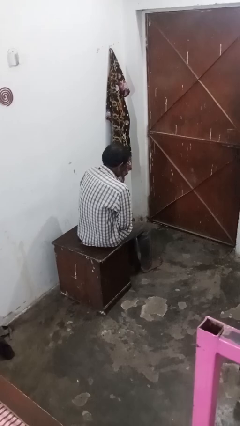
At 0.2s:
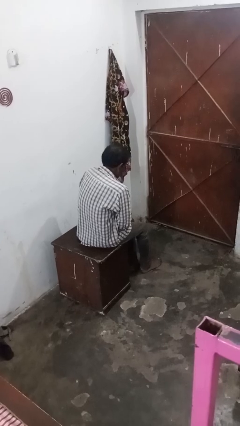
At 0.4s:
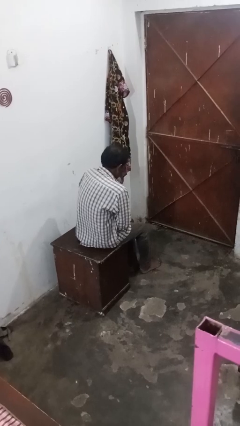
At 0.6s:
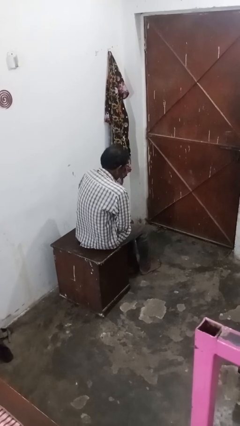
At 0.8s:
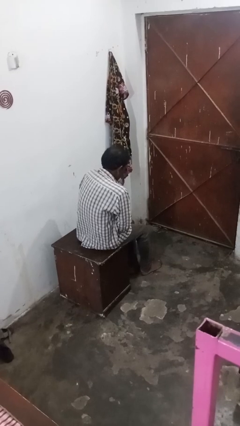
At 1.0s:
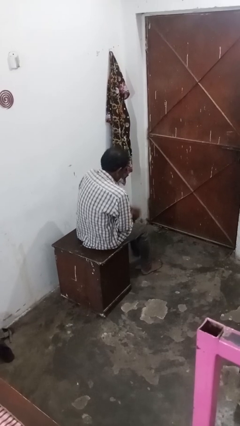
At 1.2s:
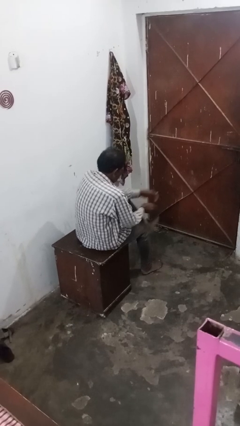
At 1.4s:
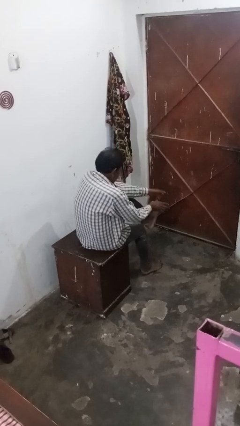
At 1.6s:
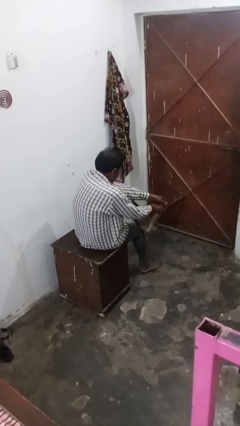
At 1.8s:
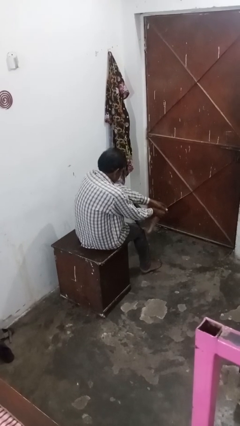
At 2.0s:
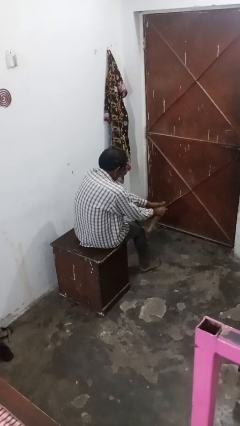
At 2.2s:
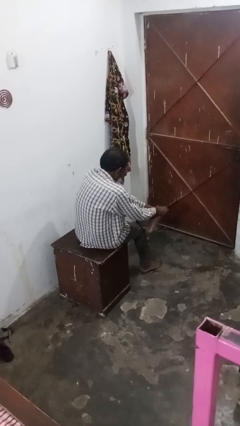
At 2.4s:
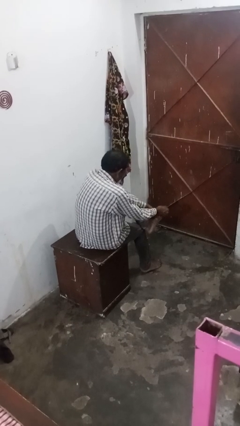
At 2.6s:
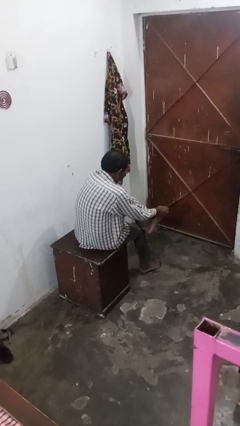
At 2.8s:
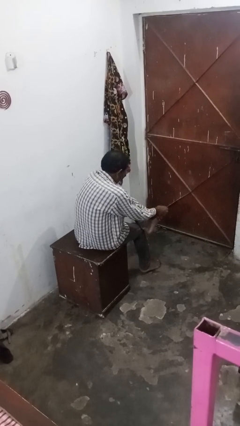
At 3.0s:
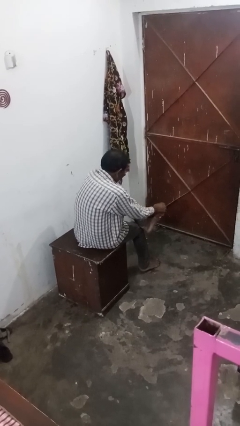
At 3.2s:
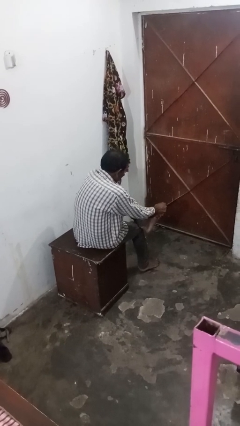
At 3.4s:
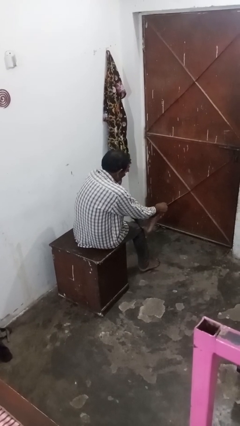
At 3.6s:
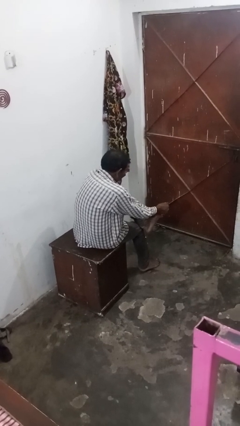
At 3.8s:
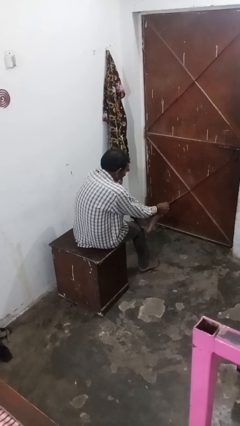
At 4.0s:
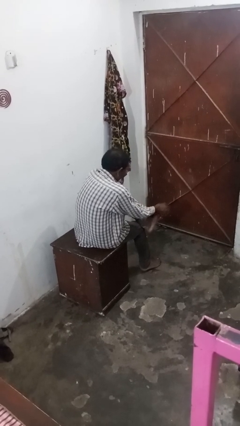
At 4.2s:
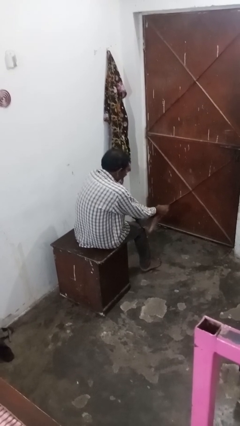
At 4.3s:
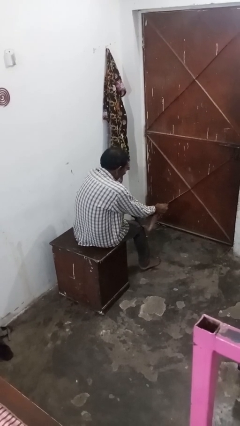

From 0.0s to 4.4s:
person rubs foot

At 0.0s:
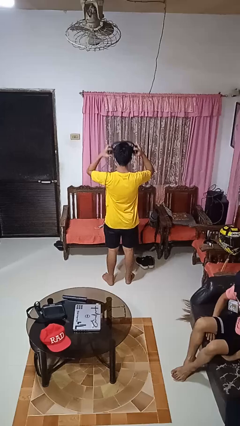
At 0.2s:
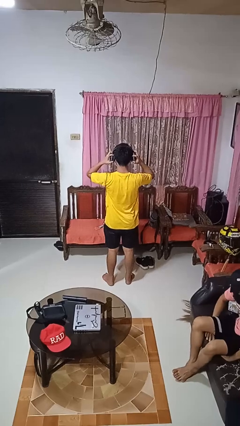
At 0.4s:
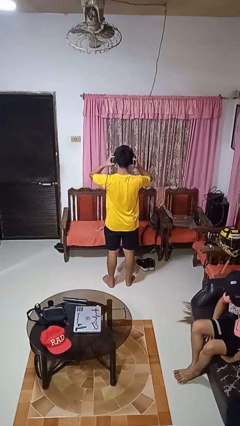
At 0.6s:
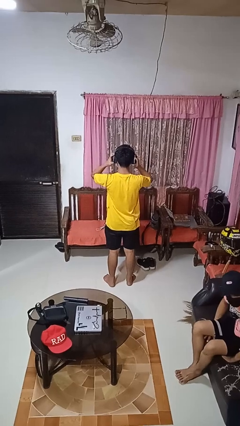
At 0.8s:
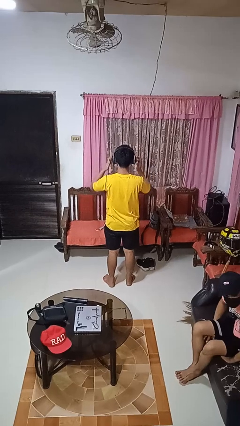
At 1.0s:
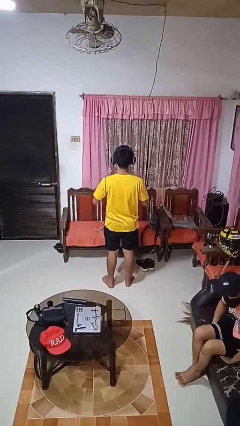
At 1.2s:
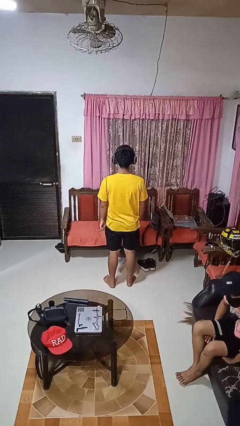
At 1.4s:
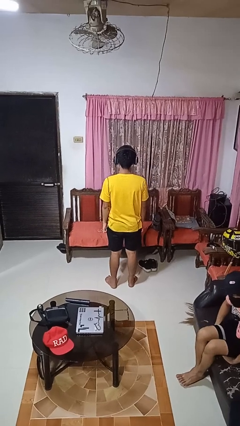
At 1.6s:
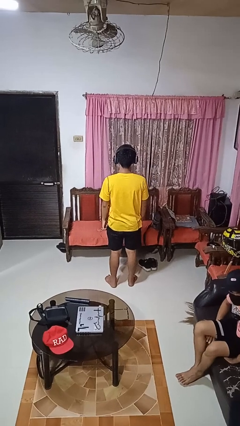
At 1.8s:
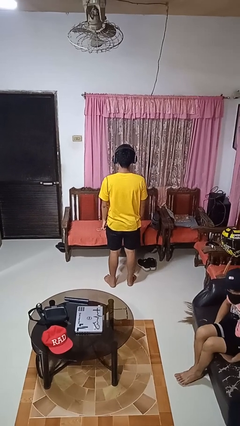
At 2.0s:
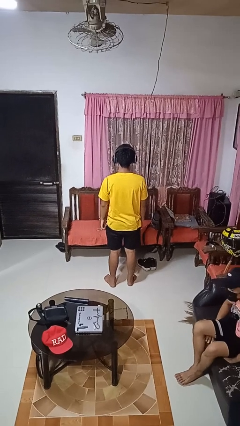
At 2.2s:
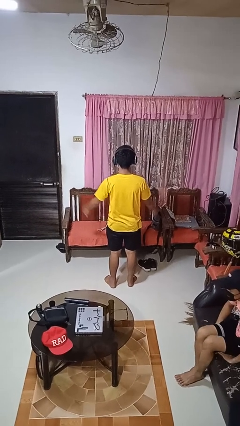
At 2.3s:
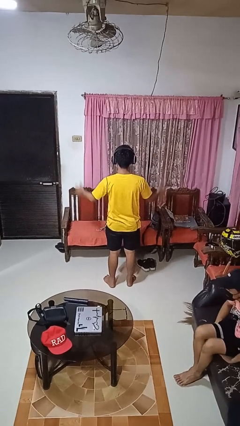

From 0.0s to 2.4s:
person puts on headphones

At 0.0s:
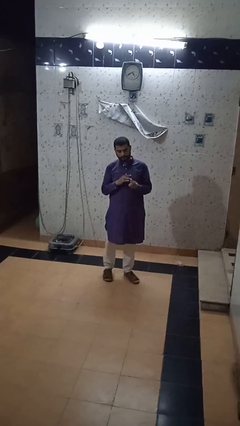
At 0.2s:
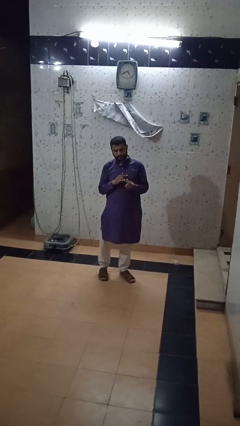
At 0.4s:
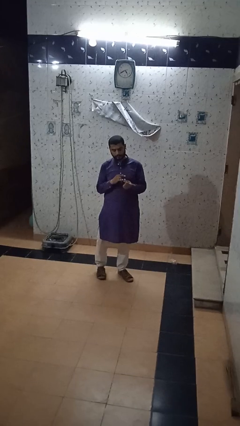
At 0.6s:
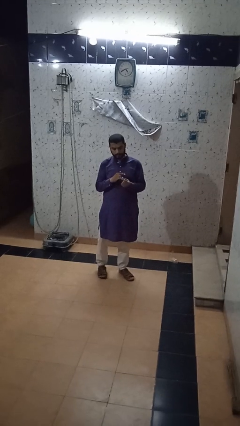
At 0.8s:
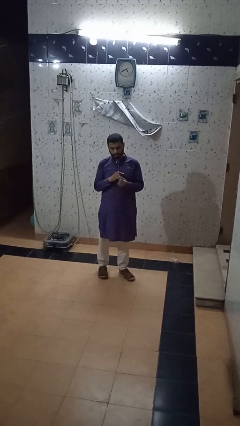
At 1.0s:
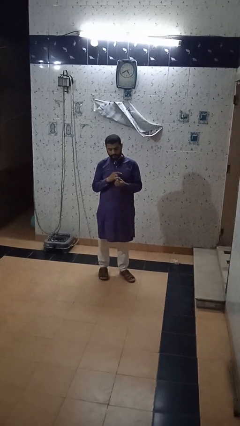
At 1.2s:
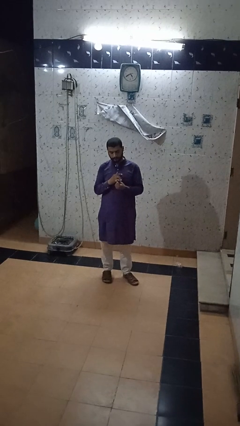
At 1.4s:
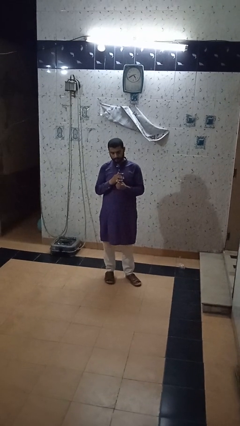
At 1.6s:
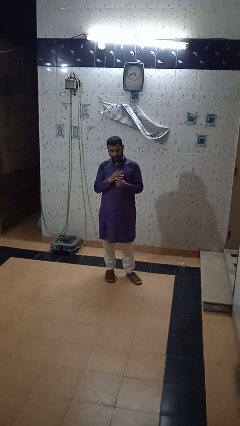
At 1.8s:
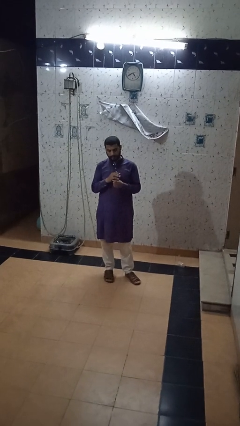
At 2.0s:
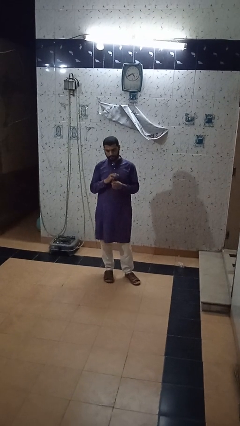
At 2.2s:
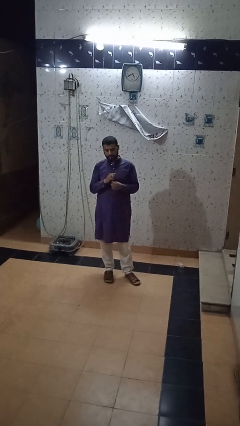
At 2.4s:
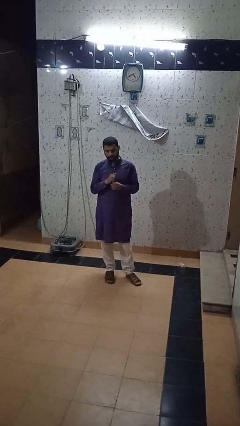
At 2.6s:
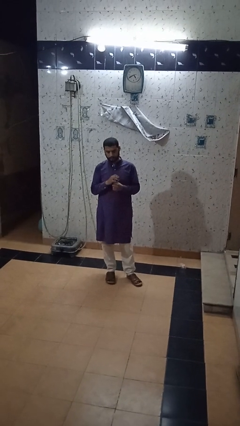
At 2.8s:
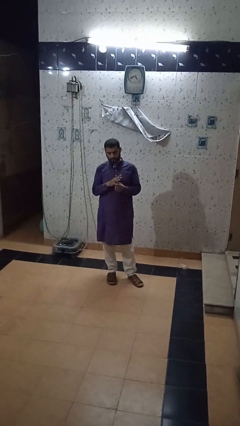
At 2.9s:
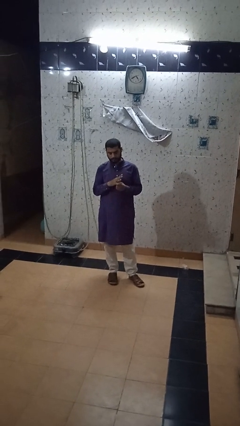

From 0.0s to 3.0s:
person puts on ring

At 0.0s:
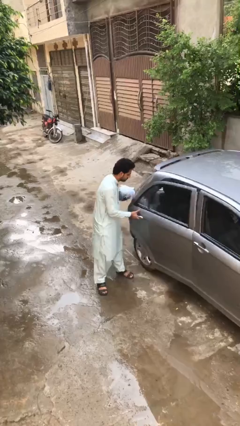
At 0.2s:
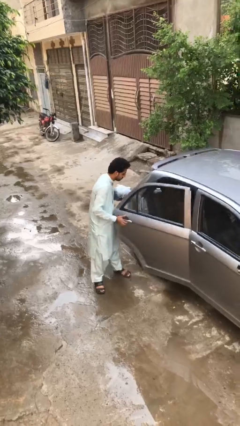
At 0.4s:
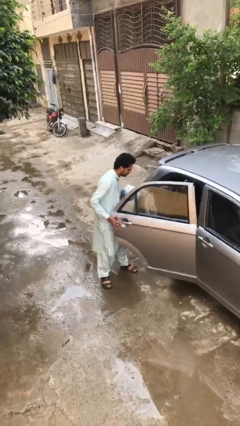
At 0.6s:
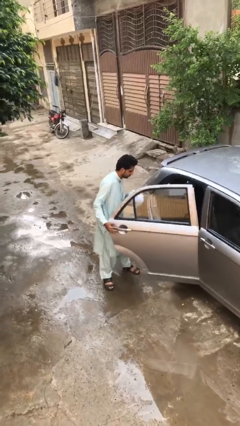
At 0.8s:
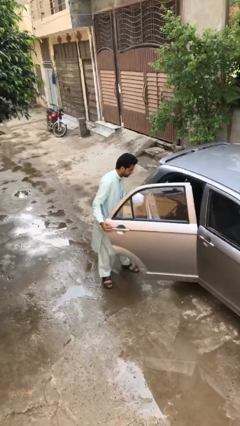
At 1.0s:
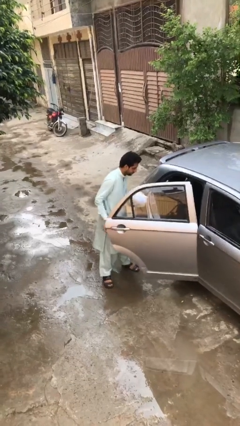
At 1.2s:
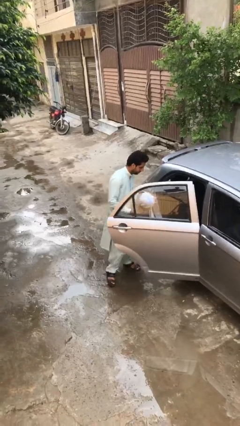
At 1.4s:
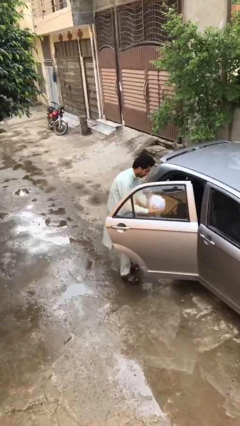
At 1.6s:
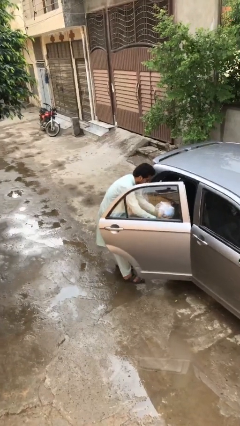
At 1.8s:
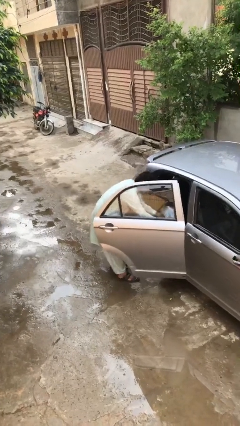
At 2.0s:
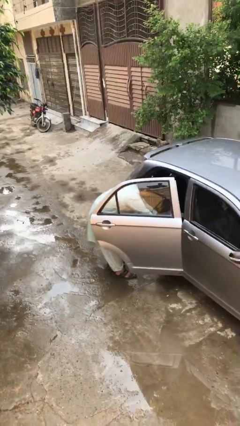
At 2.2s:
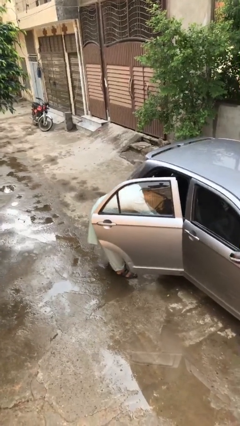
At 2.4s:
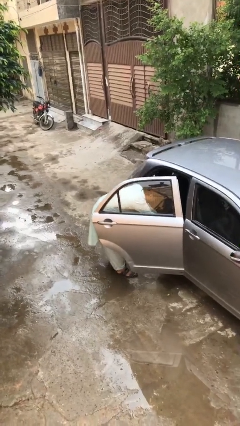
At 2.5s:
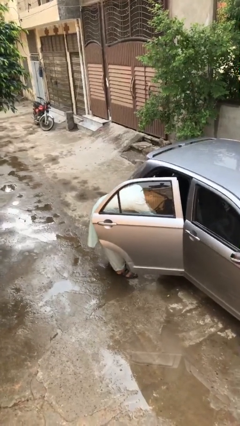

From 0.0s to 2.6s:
person loads car

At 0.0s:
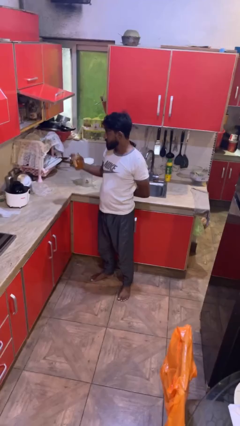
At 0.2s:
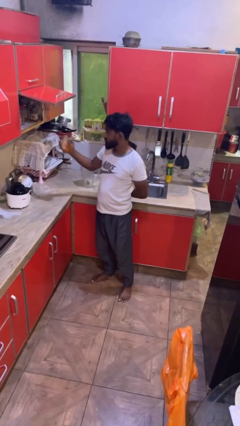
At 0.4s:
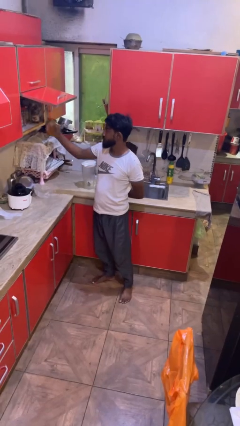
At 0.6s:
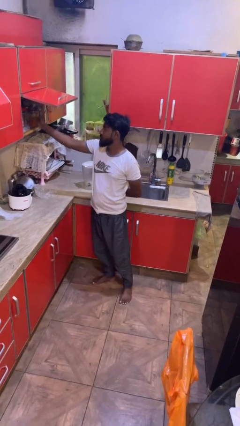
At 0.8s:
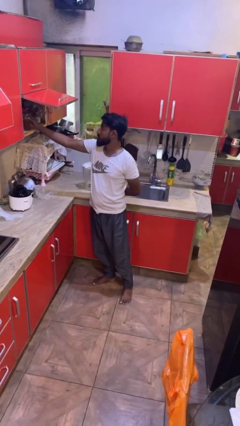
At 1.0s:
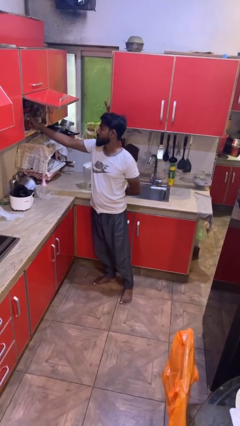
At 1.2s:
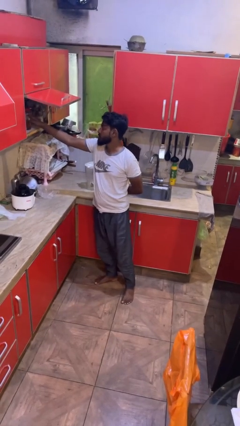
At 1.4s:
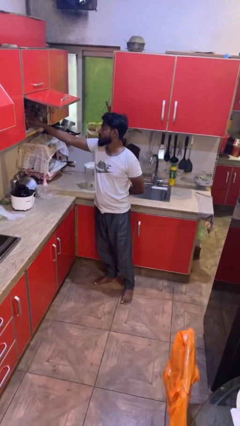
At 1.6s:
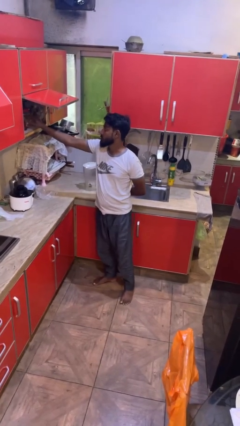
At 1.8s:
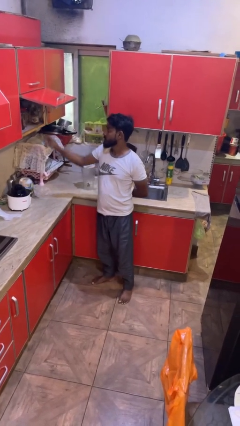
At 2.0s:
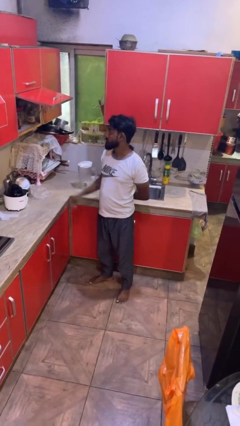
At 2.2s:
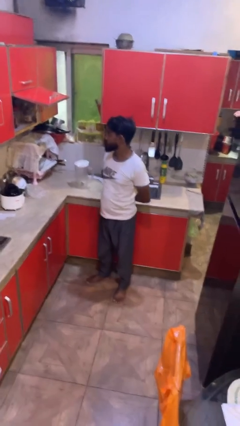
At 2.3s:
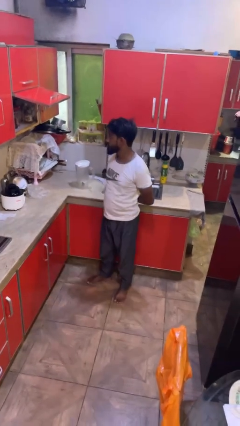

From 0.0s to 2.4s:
person puts down object into cabinet

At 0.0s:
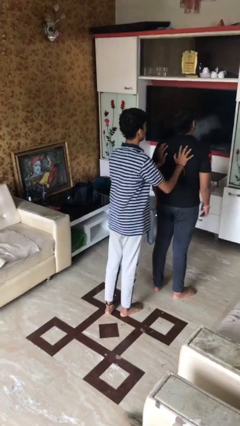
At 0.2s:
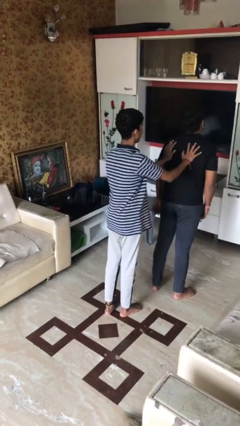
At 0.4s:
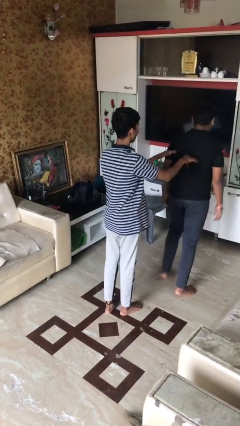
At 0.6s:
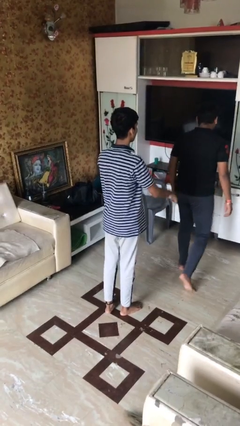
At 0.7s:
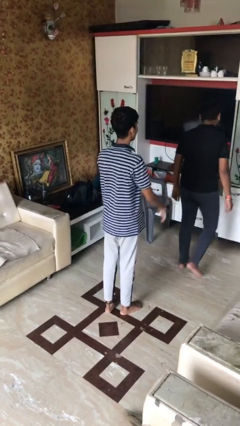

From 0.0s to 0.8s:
person shoves person

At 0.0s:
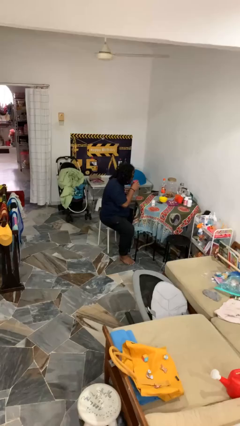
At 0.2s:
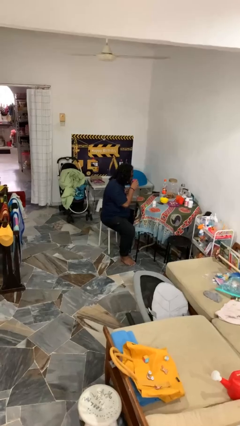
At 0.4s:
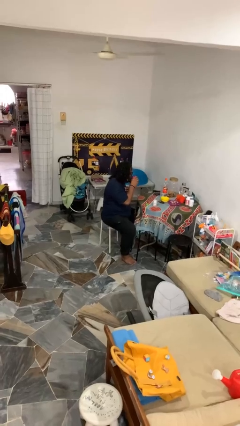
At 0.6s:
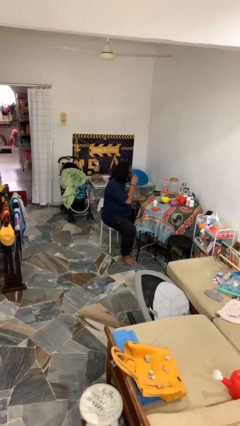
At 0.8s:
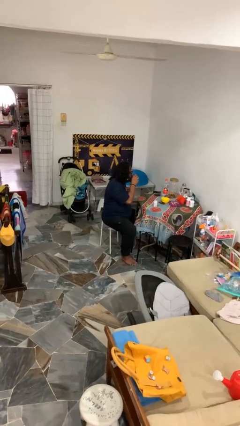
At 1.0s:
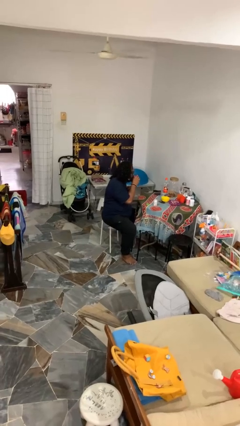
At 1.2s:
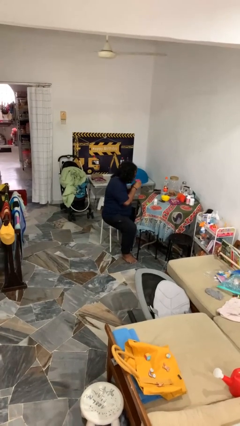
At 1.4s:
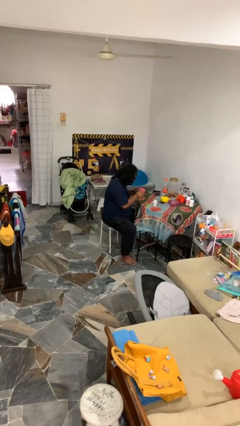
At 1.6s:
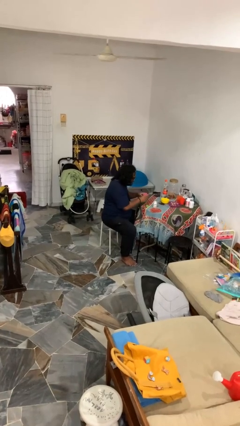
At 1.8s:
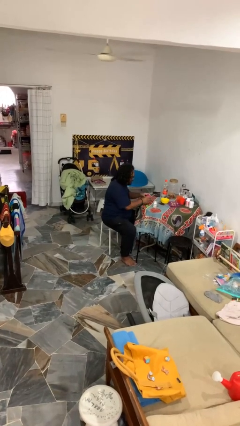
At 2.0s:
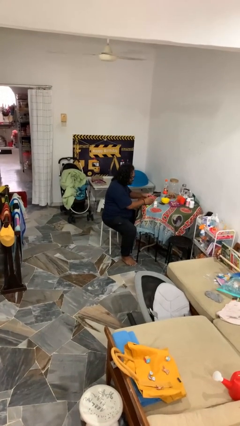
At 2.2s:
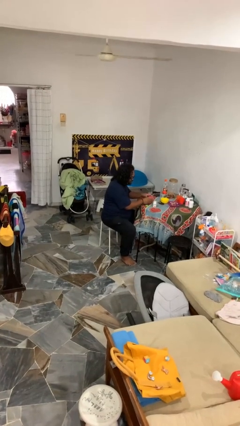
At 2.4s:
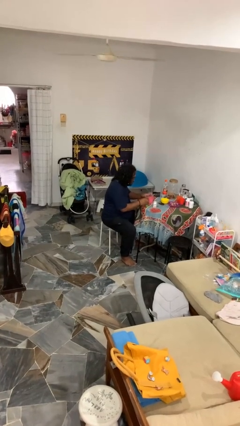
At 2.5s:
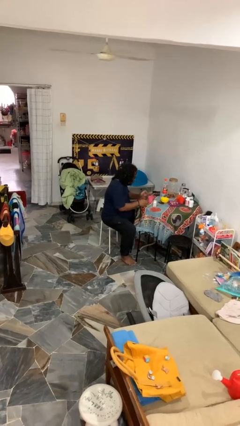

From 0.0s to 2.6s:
person drinks from cup
